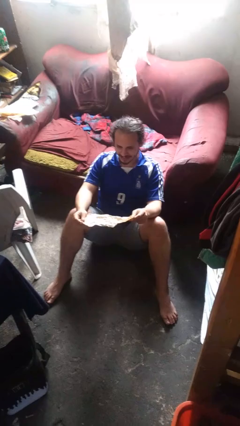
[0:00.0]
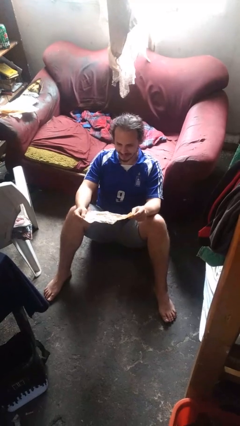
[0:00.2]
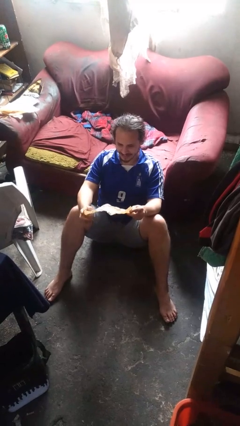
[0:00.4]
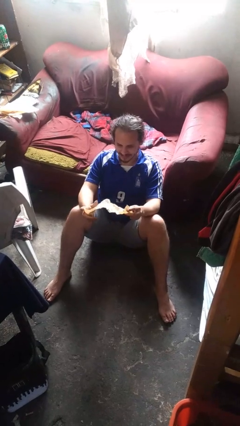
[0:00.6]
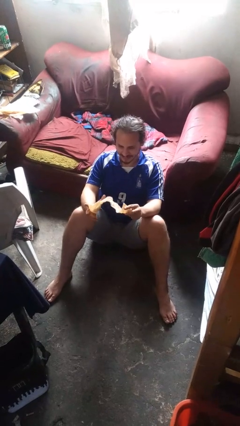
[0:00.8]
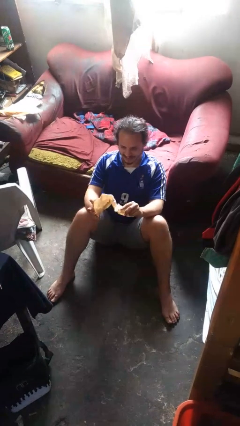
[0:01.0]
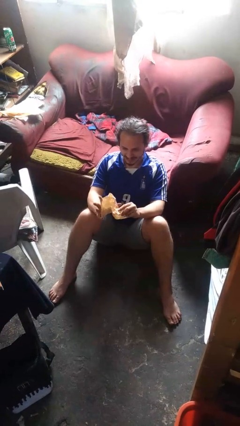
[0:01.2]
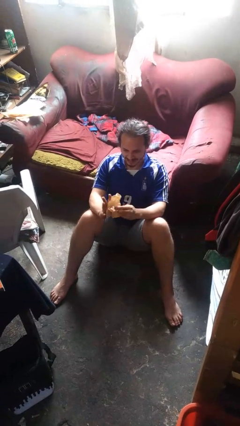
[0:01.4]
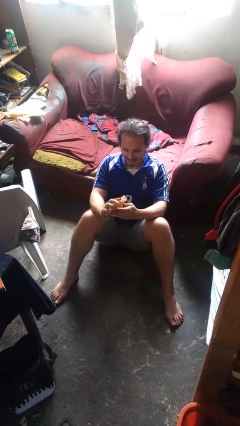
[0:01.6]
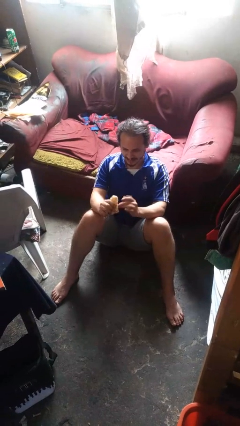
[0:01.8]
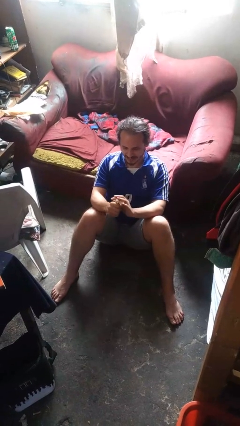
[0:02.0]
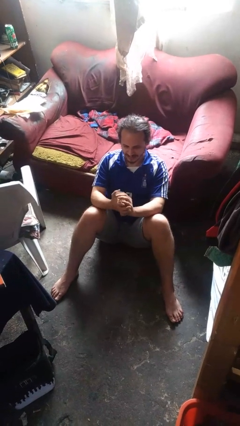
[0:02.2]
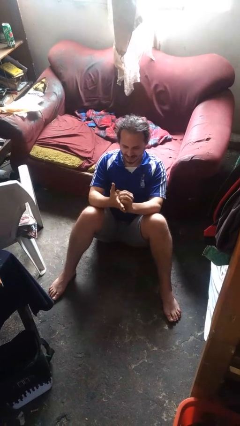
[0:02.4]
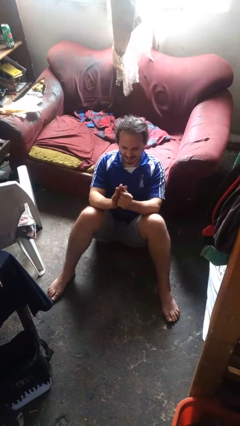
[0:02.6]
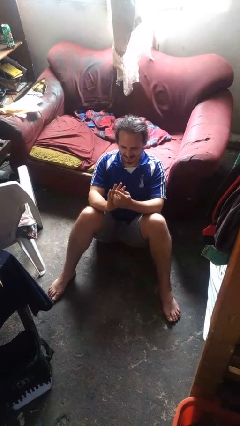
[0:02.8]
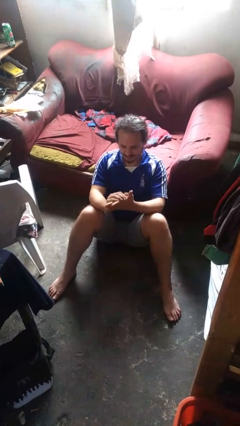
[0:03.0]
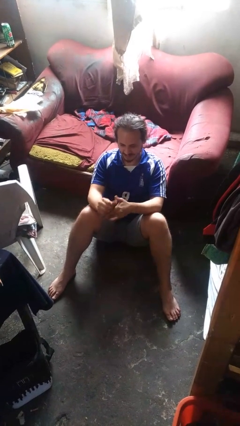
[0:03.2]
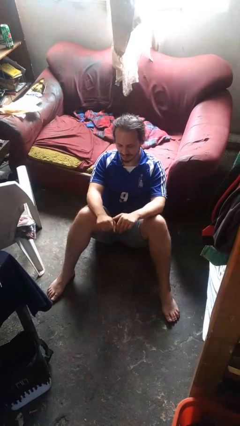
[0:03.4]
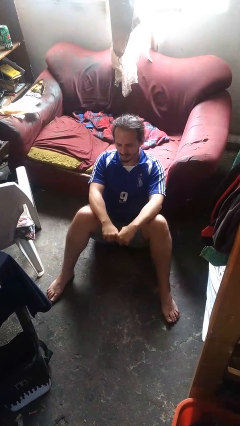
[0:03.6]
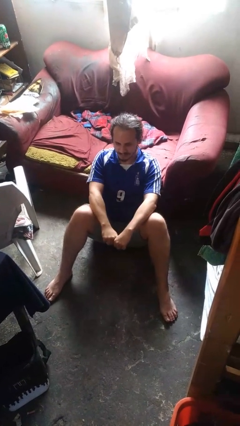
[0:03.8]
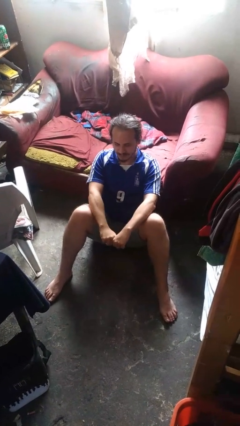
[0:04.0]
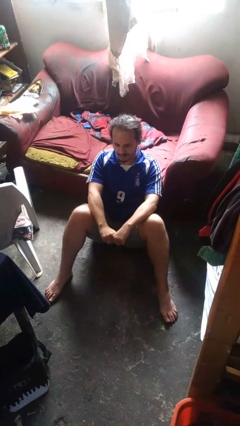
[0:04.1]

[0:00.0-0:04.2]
person crumples paper

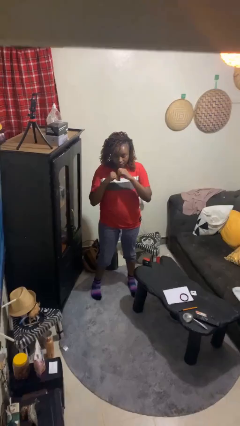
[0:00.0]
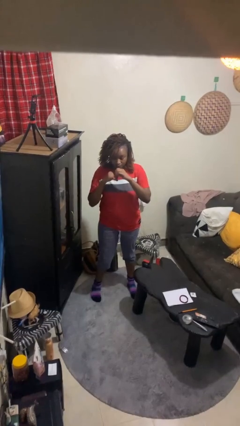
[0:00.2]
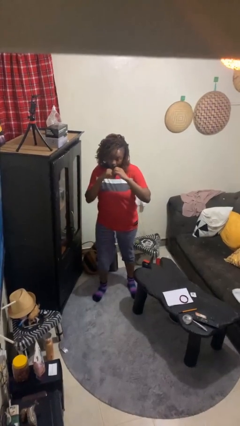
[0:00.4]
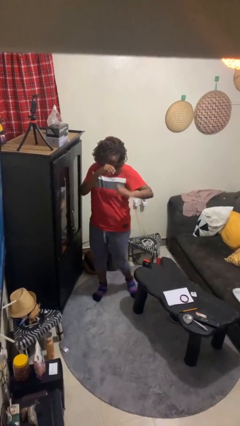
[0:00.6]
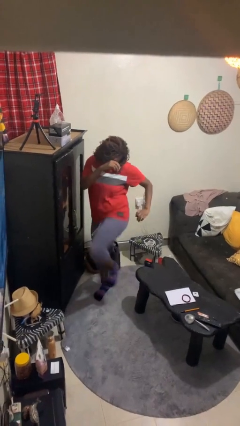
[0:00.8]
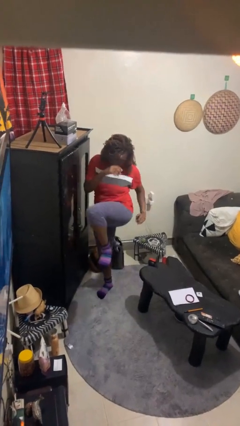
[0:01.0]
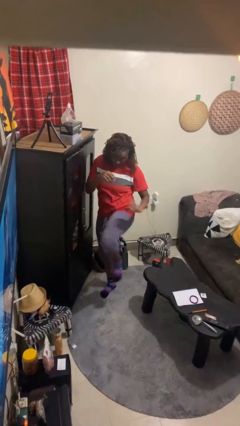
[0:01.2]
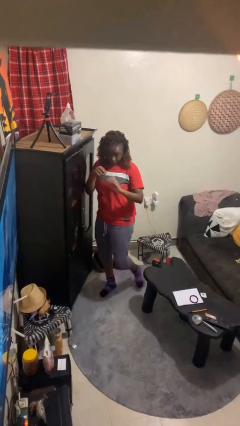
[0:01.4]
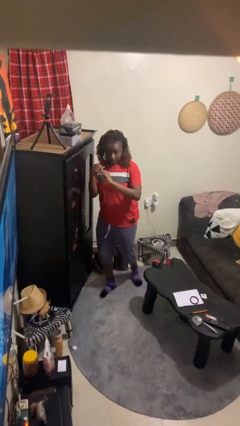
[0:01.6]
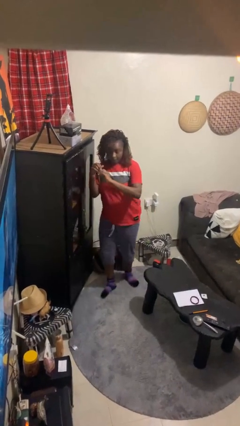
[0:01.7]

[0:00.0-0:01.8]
person karate kicks

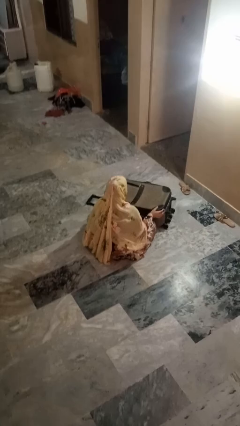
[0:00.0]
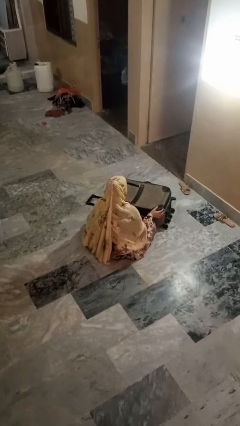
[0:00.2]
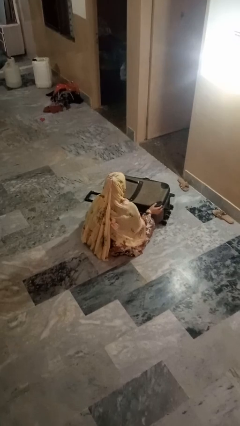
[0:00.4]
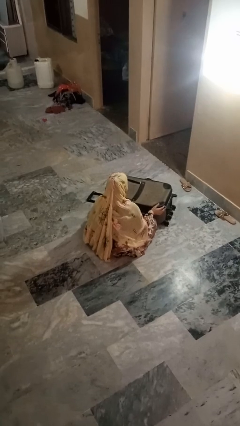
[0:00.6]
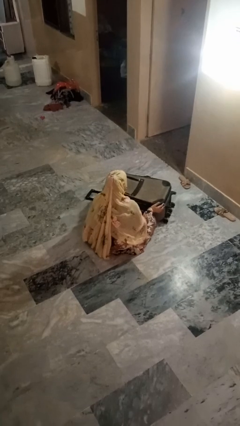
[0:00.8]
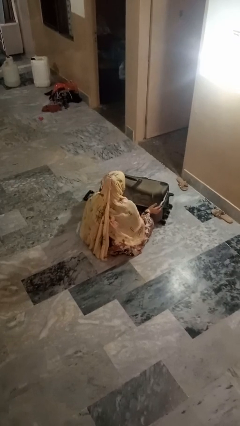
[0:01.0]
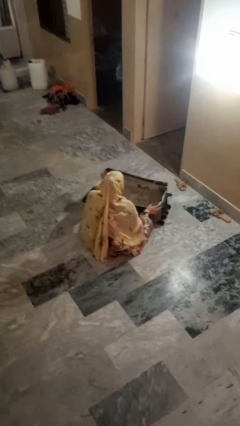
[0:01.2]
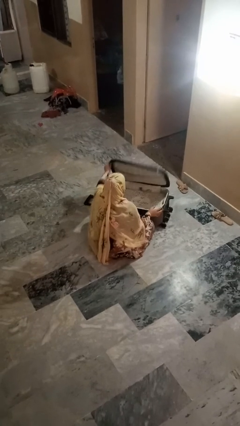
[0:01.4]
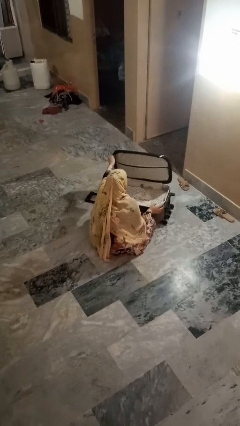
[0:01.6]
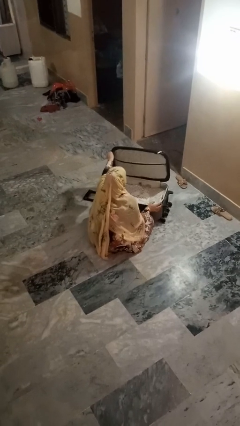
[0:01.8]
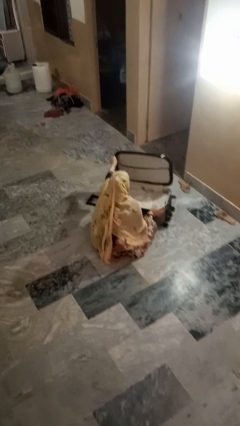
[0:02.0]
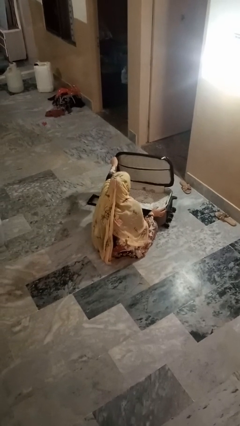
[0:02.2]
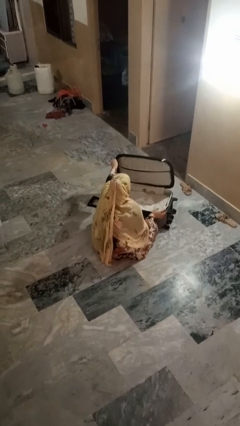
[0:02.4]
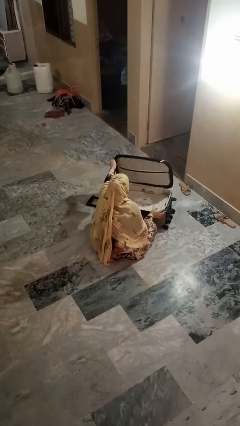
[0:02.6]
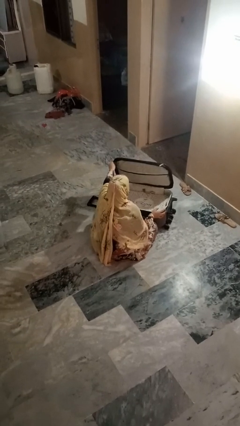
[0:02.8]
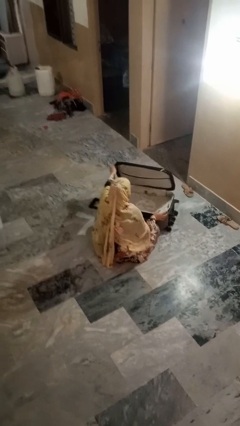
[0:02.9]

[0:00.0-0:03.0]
person opens suitcase

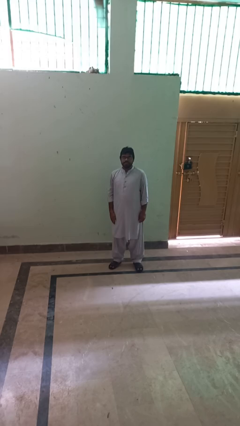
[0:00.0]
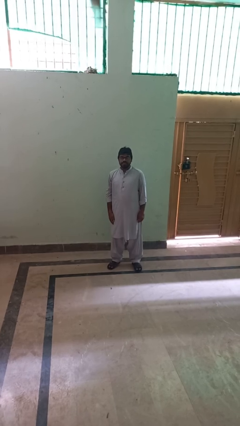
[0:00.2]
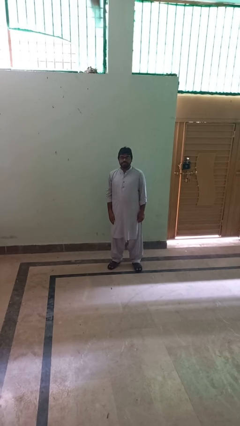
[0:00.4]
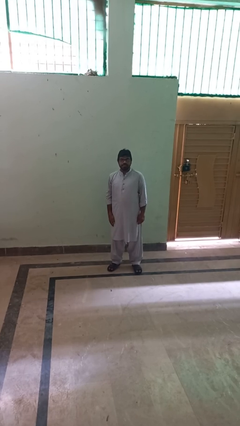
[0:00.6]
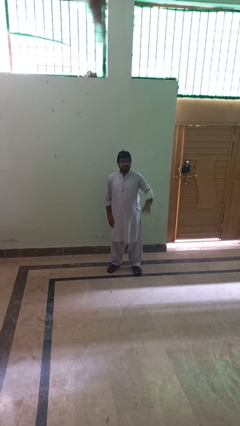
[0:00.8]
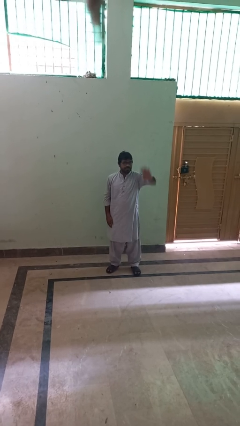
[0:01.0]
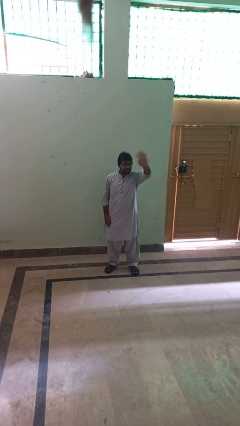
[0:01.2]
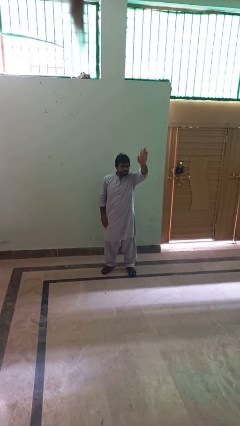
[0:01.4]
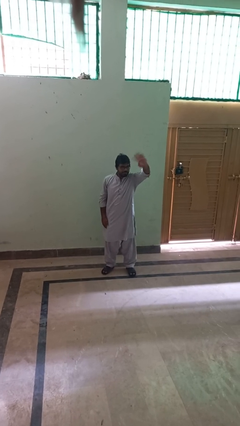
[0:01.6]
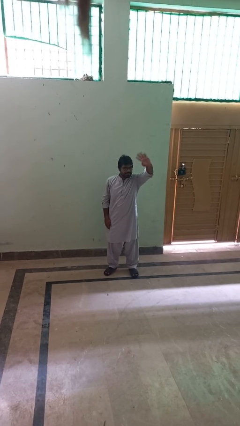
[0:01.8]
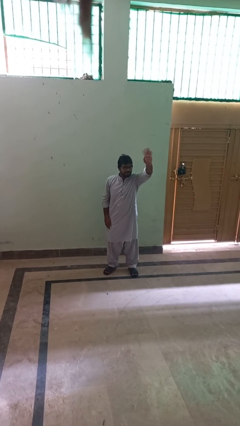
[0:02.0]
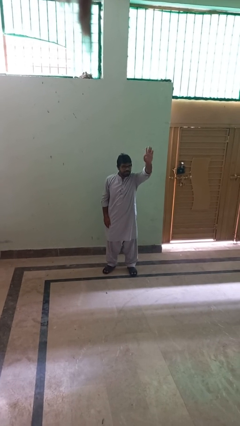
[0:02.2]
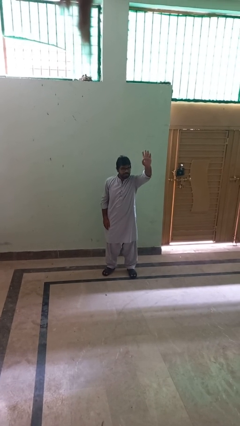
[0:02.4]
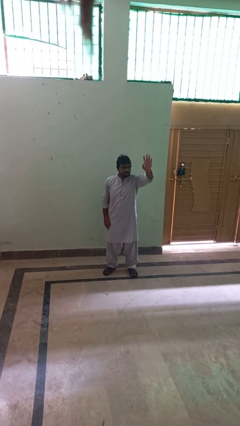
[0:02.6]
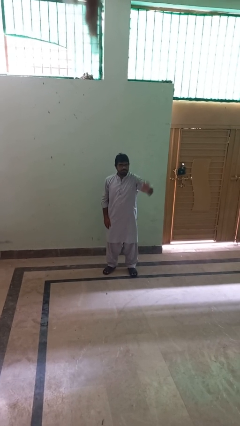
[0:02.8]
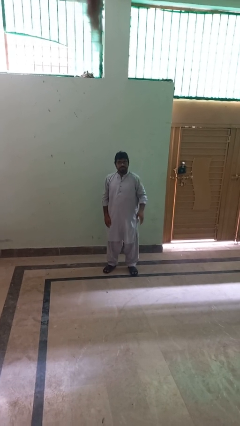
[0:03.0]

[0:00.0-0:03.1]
person waves at person

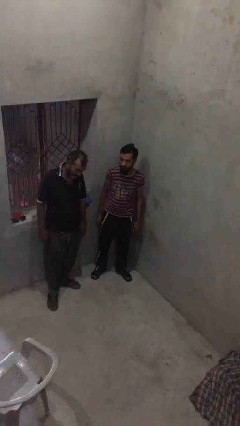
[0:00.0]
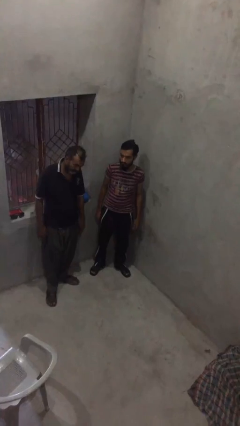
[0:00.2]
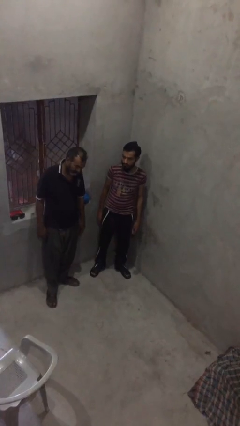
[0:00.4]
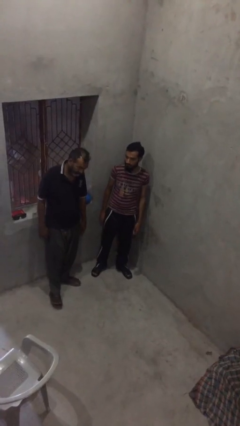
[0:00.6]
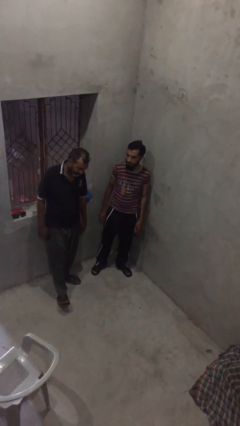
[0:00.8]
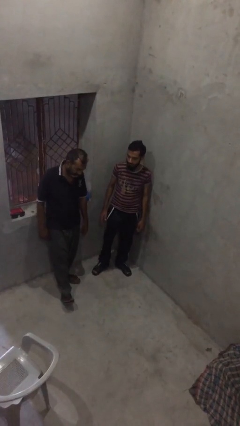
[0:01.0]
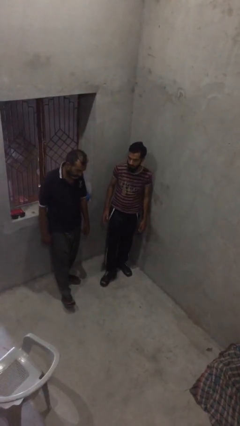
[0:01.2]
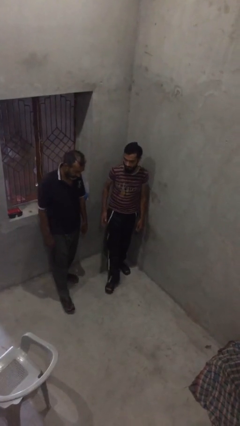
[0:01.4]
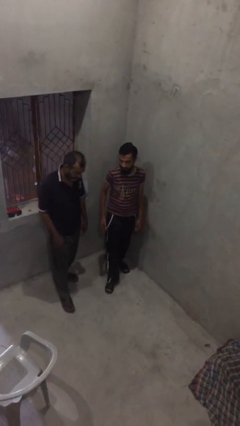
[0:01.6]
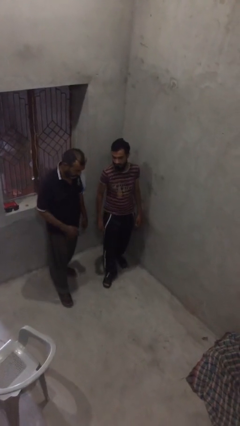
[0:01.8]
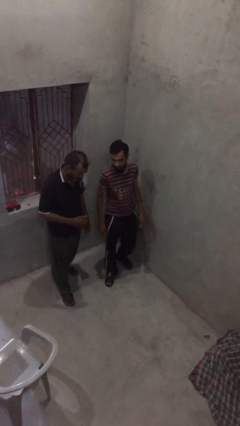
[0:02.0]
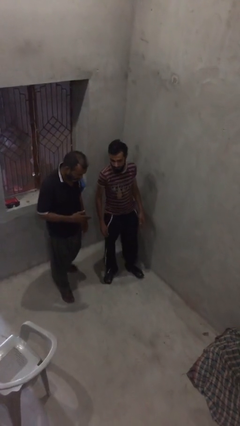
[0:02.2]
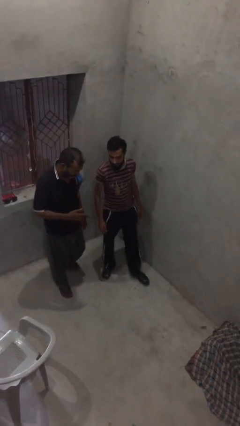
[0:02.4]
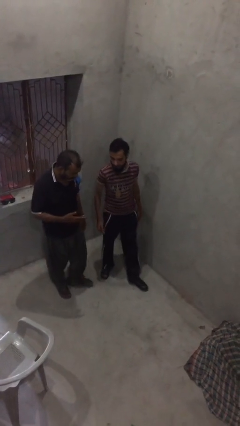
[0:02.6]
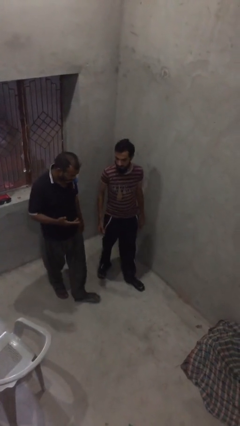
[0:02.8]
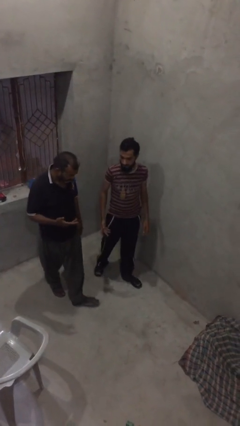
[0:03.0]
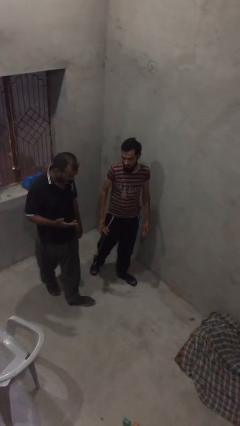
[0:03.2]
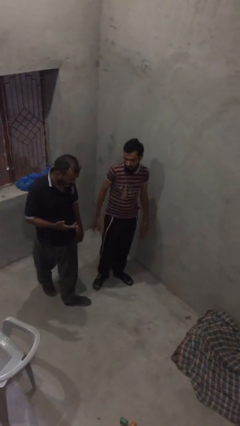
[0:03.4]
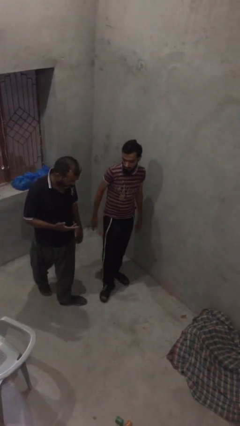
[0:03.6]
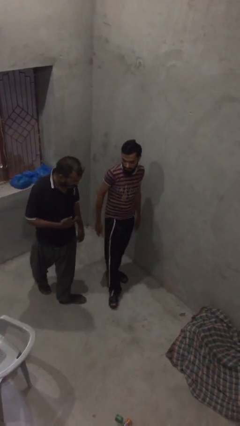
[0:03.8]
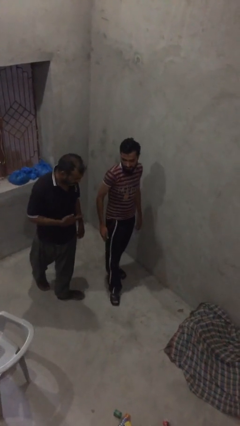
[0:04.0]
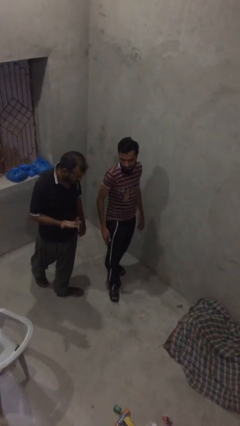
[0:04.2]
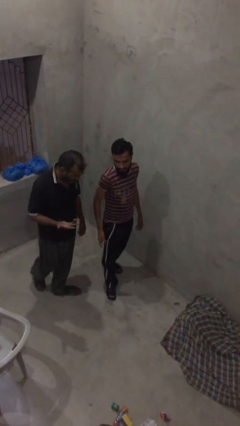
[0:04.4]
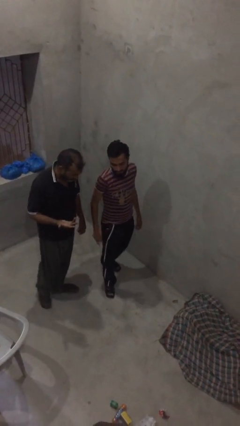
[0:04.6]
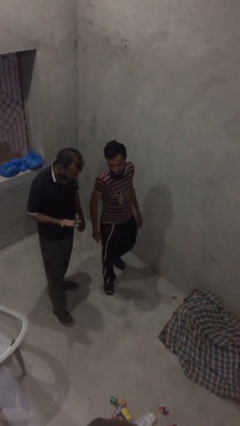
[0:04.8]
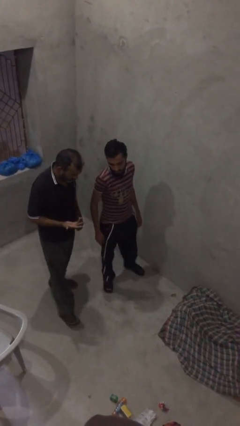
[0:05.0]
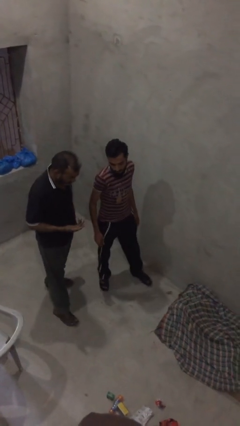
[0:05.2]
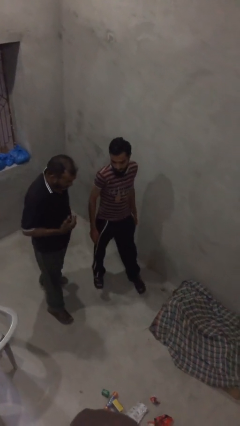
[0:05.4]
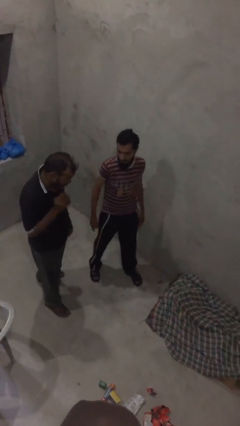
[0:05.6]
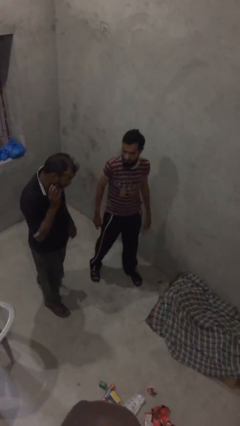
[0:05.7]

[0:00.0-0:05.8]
person talks to person
